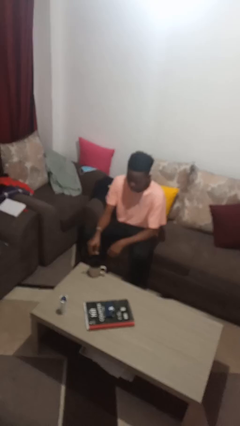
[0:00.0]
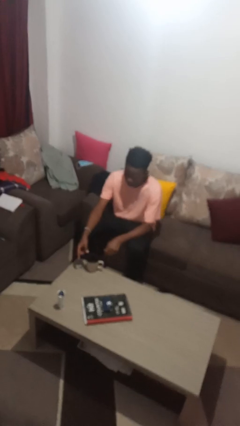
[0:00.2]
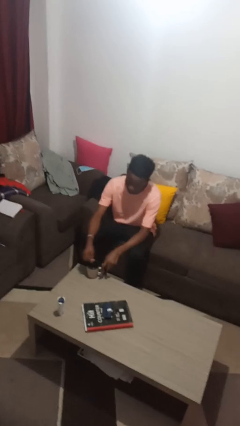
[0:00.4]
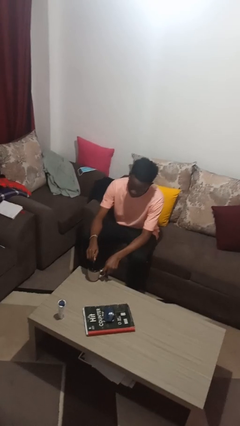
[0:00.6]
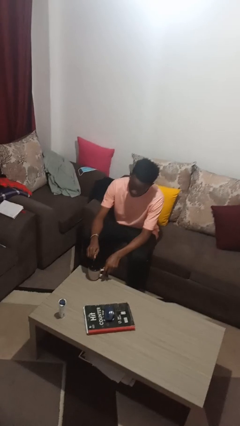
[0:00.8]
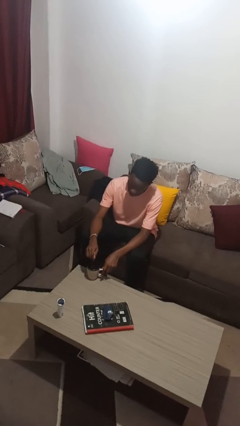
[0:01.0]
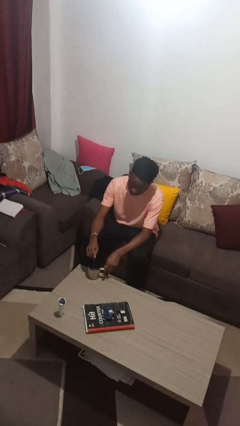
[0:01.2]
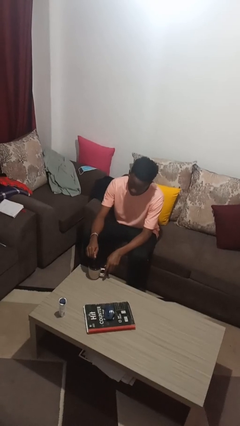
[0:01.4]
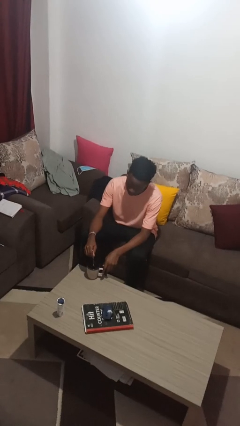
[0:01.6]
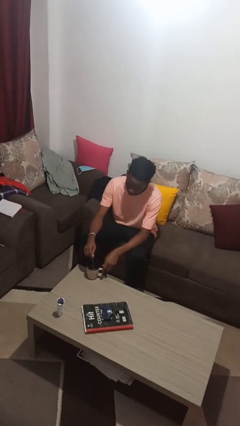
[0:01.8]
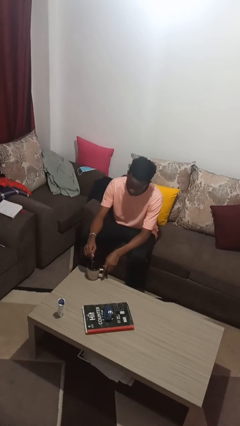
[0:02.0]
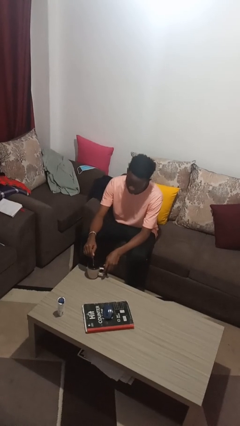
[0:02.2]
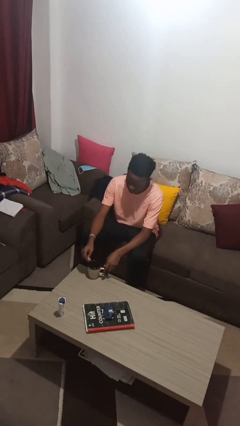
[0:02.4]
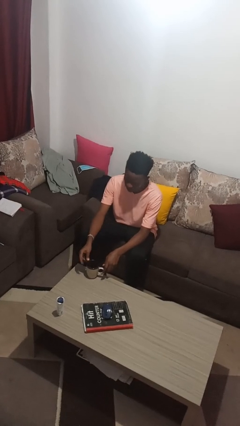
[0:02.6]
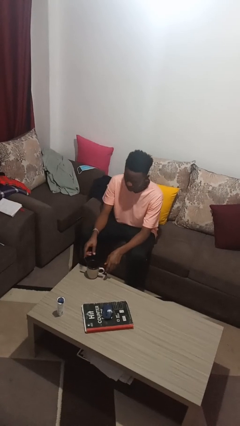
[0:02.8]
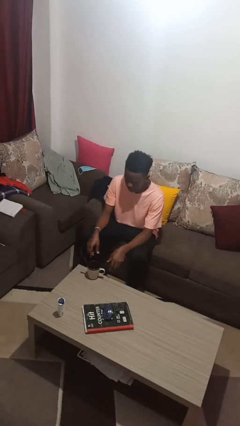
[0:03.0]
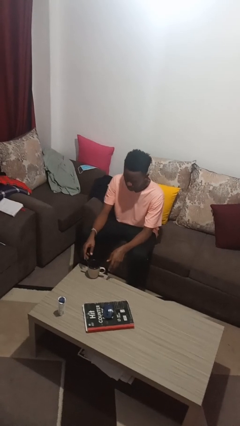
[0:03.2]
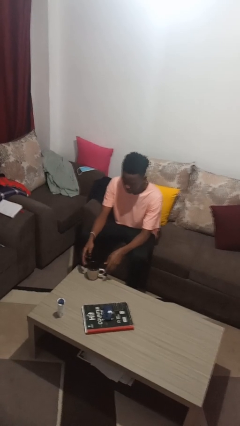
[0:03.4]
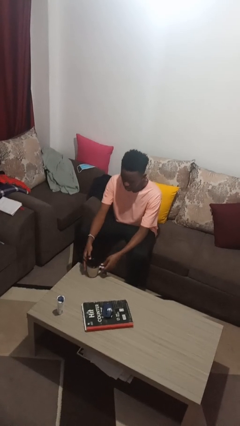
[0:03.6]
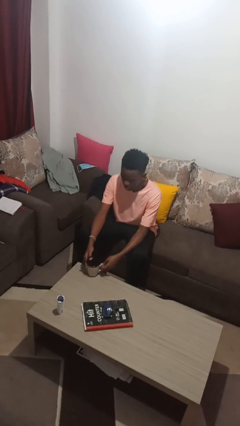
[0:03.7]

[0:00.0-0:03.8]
person stirs mug

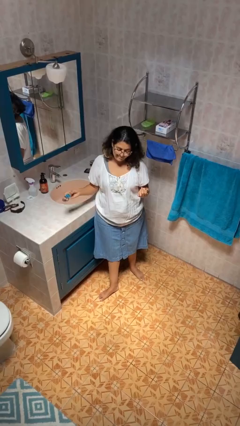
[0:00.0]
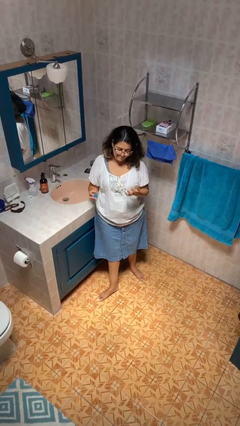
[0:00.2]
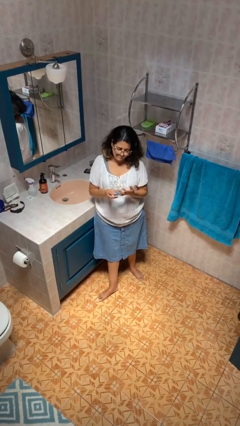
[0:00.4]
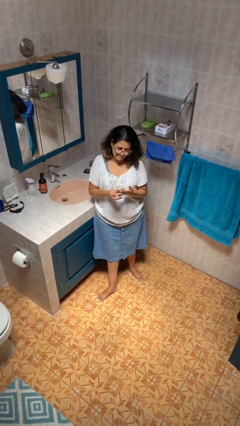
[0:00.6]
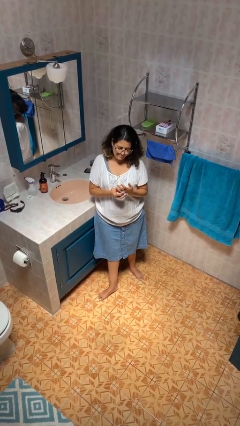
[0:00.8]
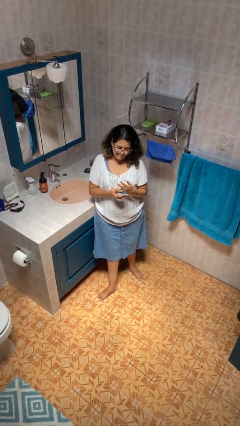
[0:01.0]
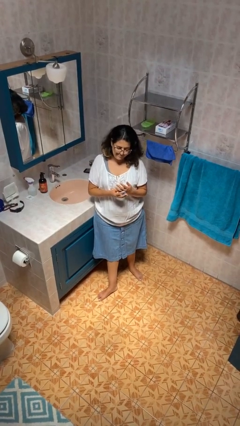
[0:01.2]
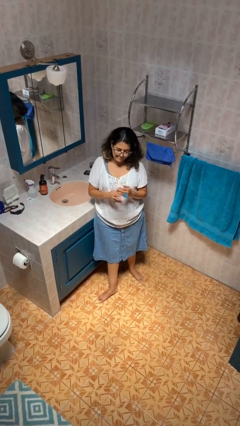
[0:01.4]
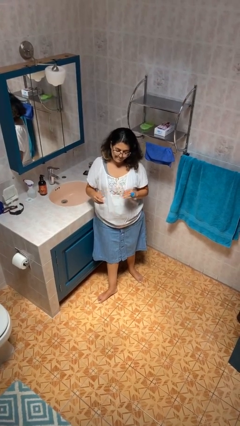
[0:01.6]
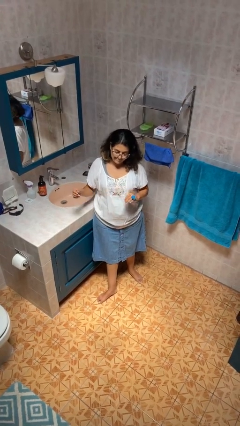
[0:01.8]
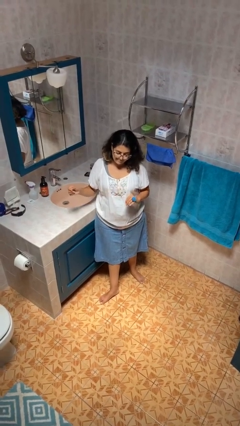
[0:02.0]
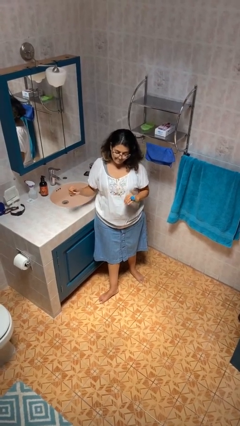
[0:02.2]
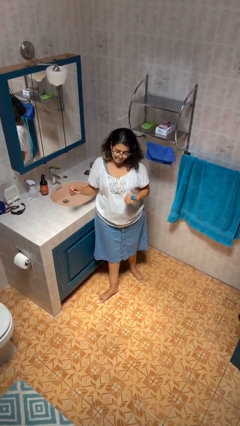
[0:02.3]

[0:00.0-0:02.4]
person puts on ring

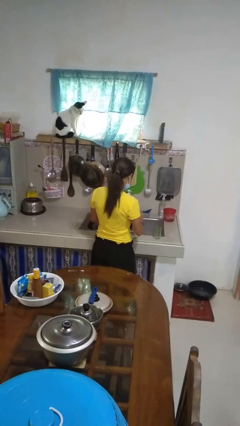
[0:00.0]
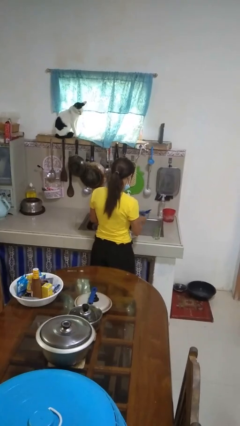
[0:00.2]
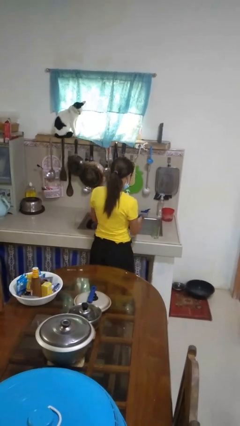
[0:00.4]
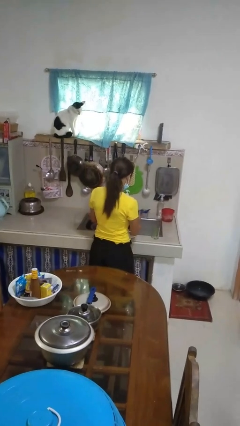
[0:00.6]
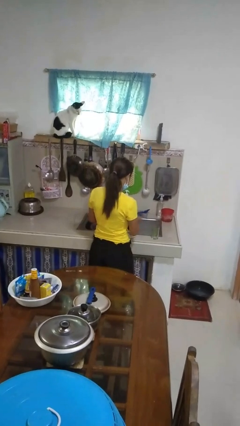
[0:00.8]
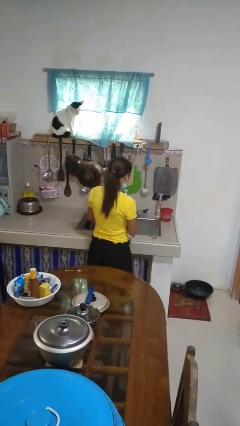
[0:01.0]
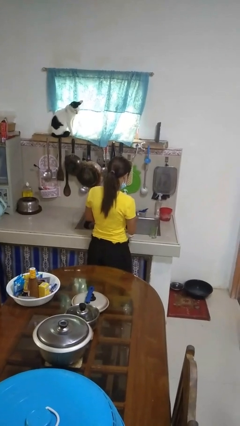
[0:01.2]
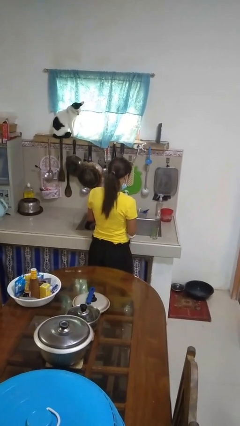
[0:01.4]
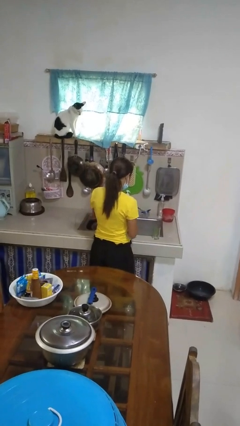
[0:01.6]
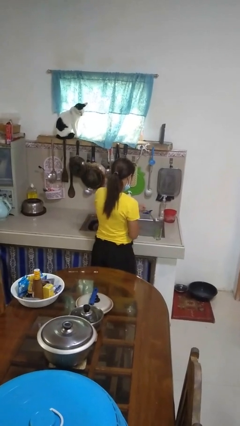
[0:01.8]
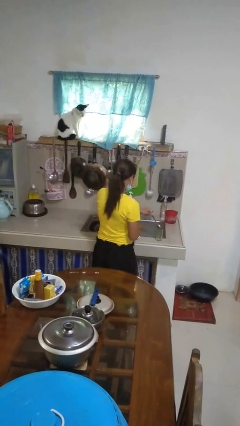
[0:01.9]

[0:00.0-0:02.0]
person dries dish

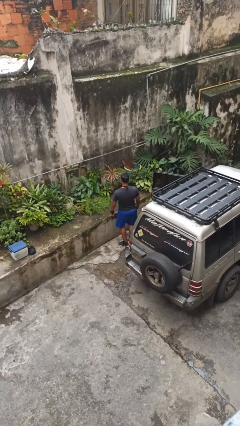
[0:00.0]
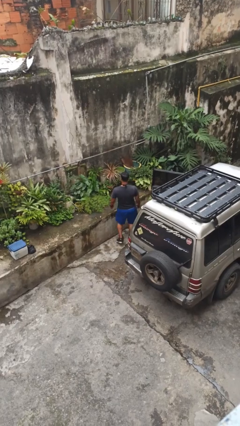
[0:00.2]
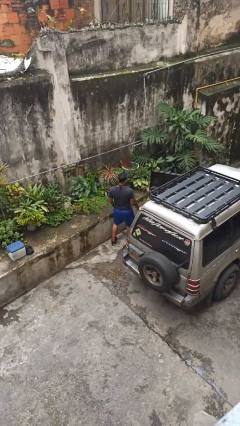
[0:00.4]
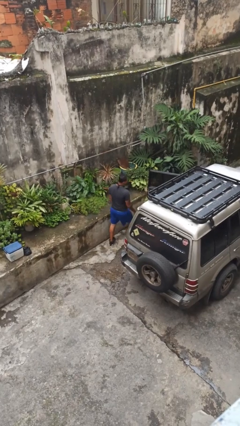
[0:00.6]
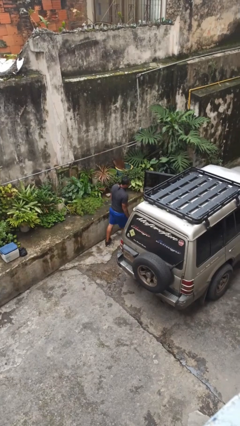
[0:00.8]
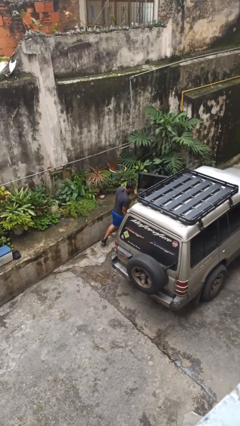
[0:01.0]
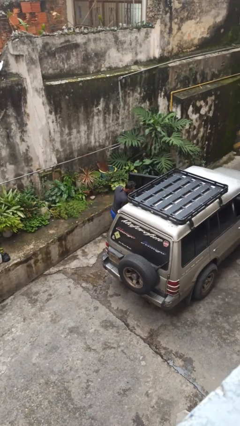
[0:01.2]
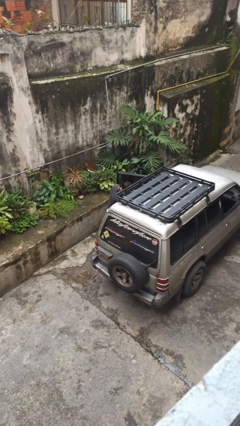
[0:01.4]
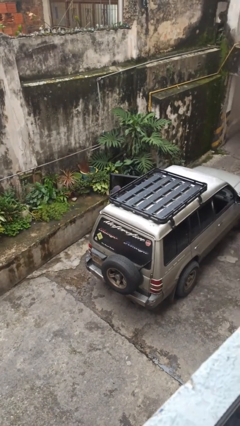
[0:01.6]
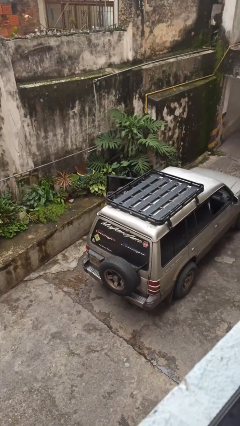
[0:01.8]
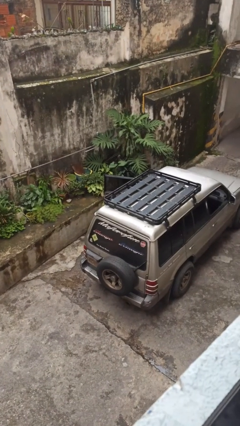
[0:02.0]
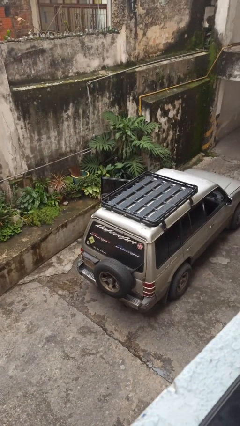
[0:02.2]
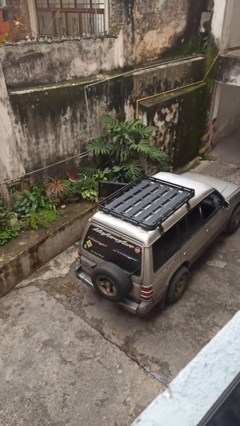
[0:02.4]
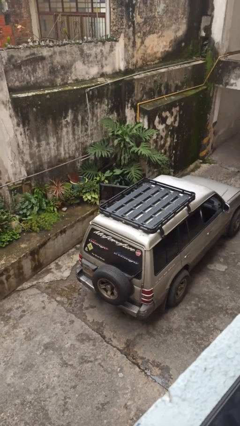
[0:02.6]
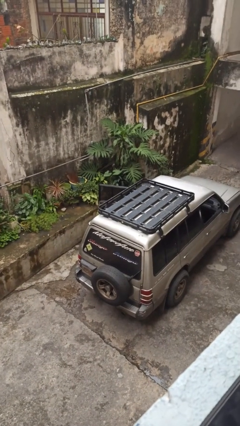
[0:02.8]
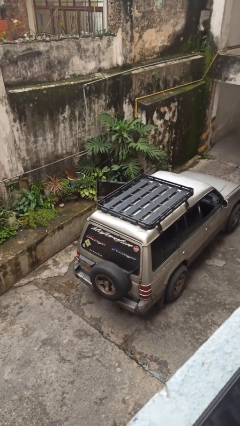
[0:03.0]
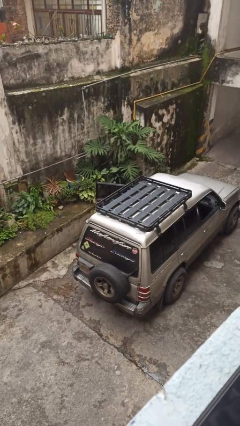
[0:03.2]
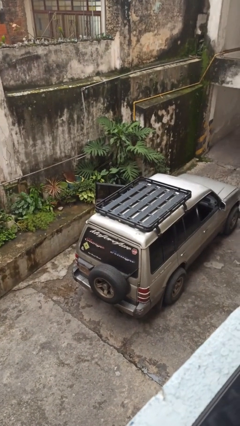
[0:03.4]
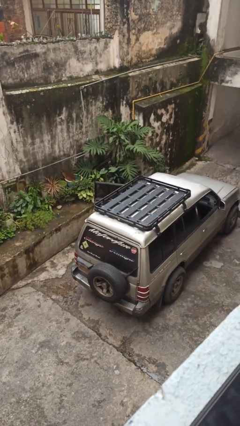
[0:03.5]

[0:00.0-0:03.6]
person enters car

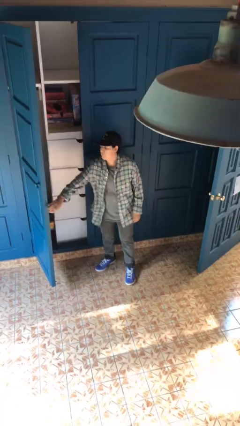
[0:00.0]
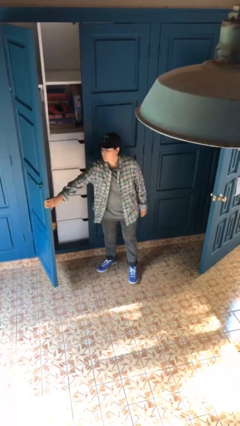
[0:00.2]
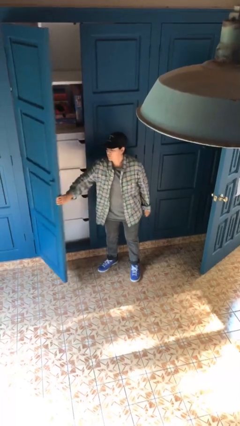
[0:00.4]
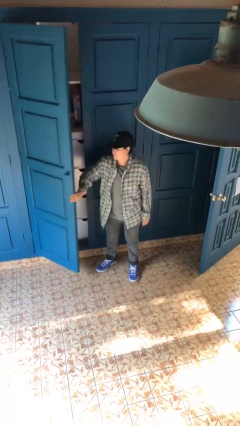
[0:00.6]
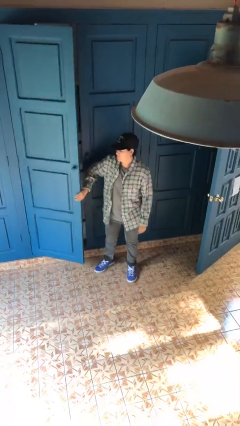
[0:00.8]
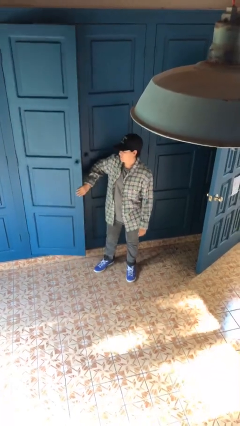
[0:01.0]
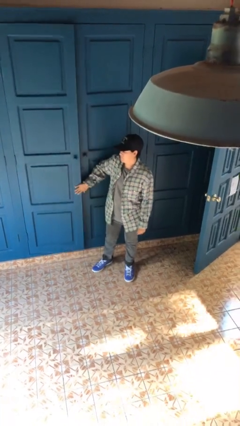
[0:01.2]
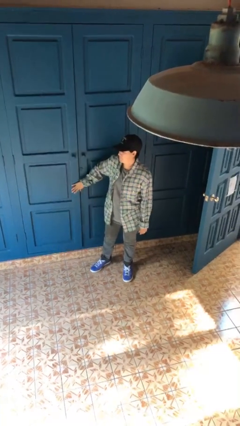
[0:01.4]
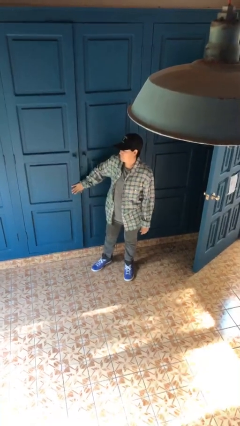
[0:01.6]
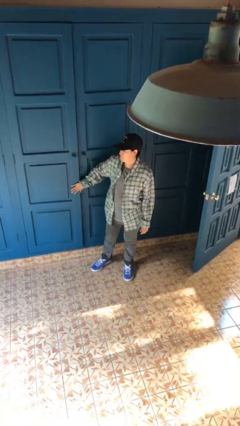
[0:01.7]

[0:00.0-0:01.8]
person closes closet door

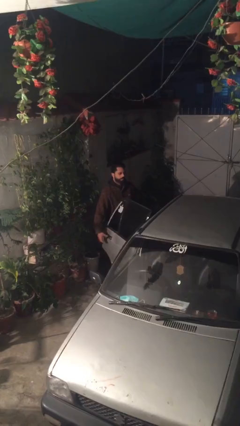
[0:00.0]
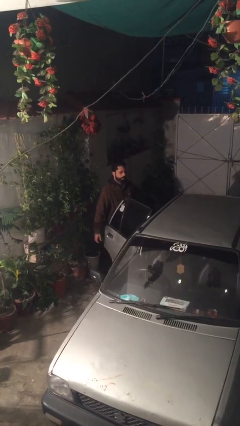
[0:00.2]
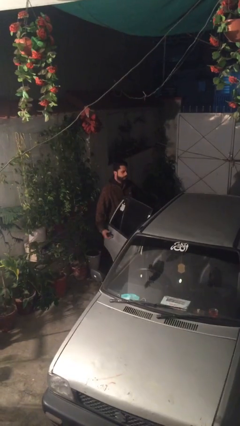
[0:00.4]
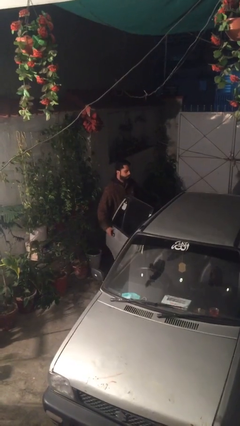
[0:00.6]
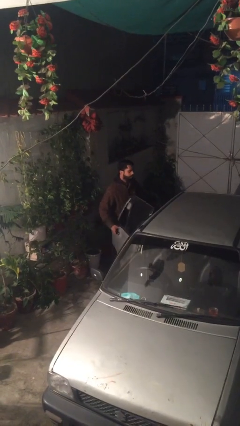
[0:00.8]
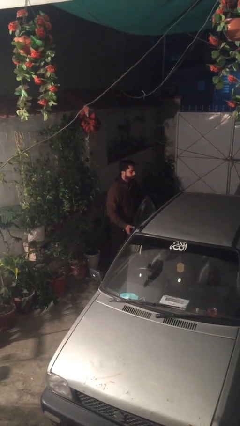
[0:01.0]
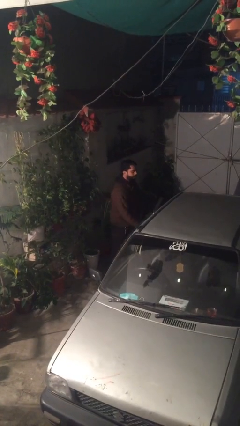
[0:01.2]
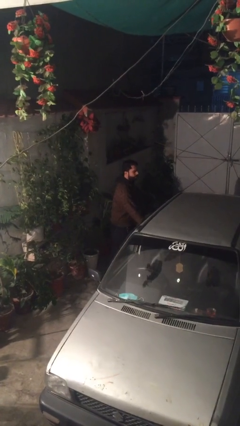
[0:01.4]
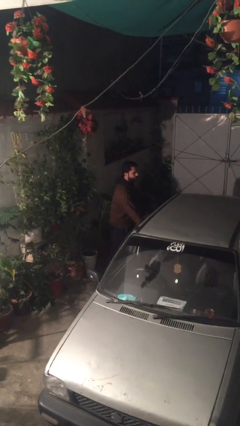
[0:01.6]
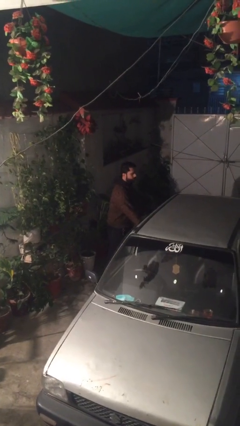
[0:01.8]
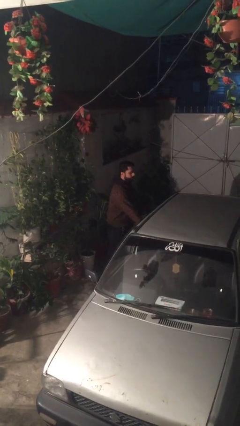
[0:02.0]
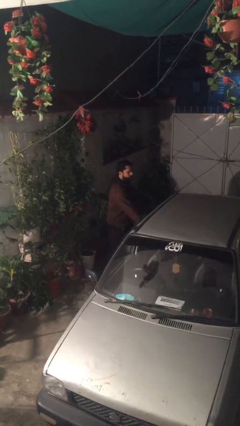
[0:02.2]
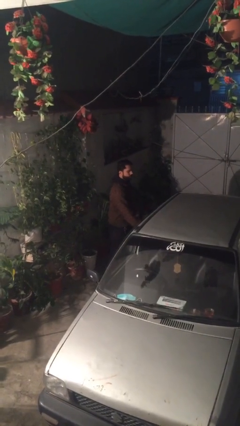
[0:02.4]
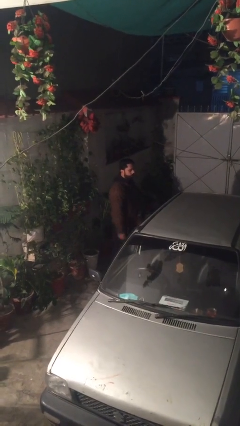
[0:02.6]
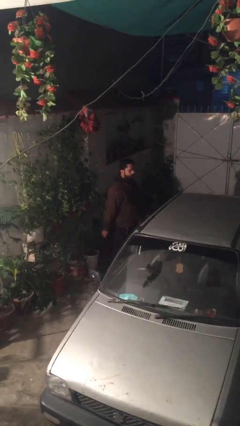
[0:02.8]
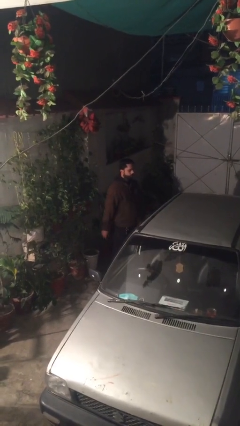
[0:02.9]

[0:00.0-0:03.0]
person closes car door

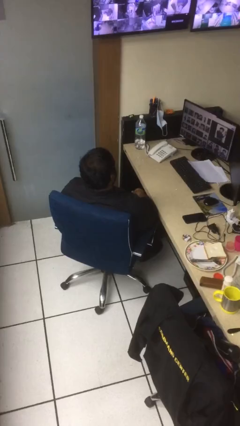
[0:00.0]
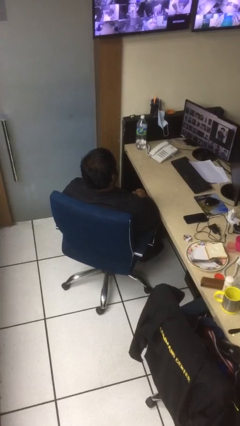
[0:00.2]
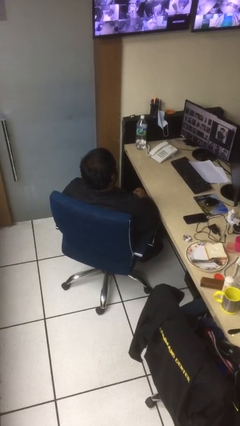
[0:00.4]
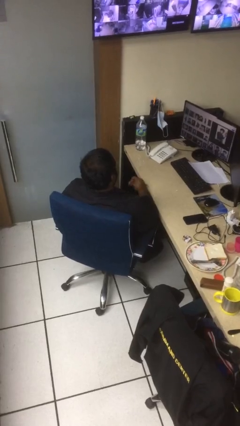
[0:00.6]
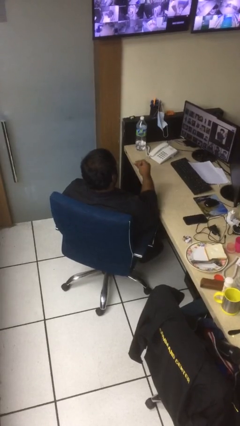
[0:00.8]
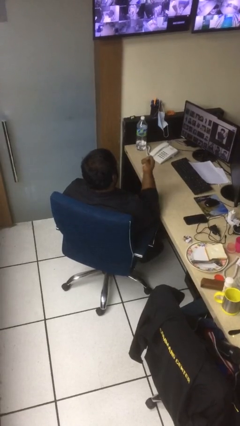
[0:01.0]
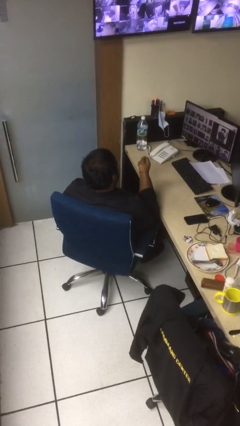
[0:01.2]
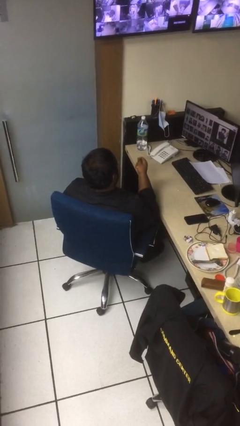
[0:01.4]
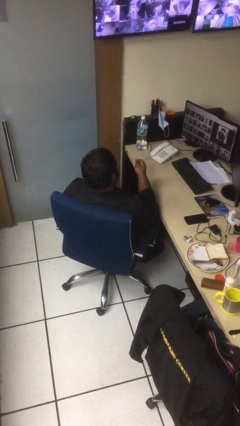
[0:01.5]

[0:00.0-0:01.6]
person snaps fingers
